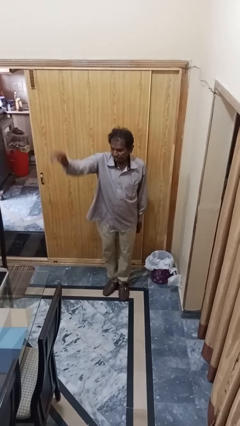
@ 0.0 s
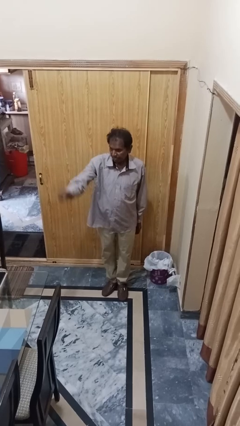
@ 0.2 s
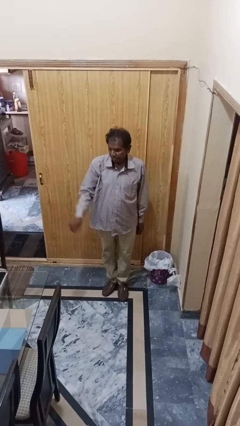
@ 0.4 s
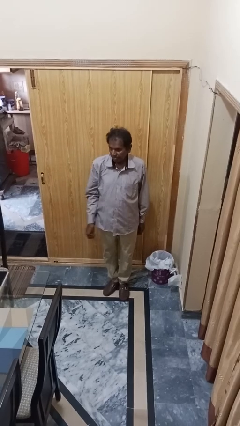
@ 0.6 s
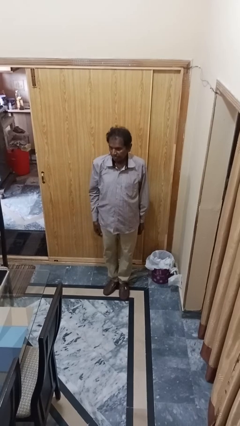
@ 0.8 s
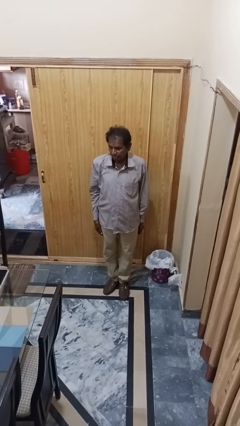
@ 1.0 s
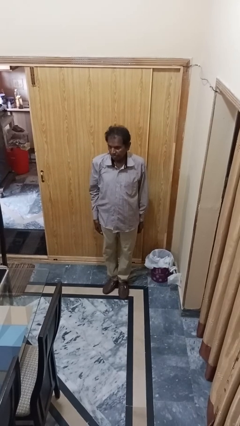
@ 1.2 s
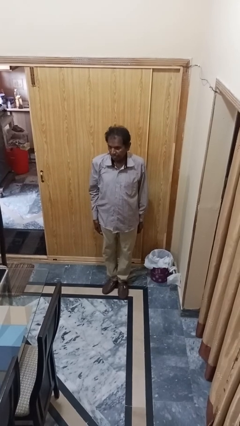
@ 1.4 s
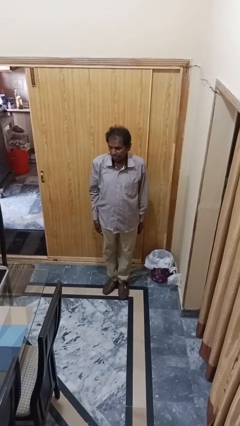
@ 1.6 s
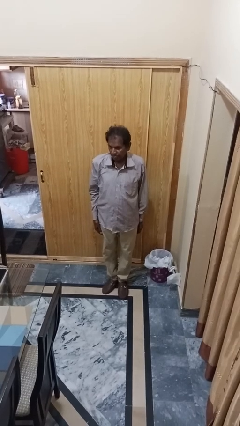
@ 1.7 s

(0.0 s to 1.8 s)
person gestures lower hand

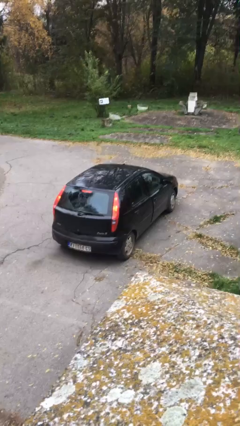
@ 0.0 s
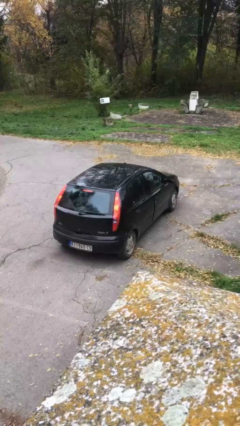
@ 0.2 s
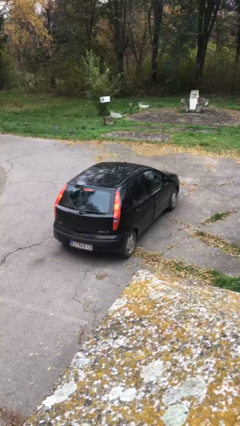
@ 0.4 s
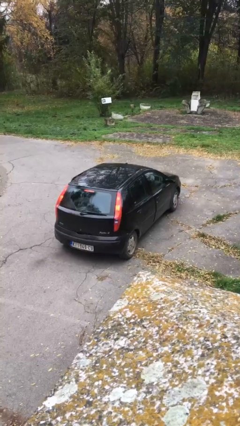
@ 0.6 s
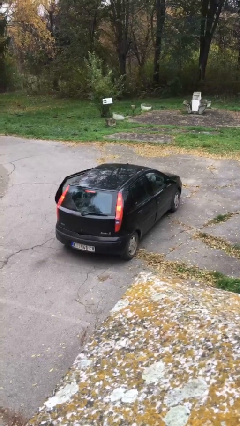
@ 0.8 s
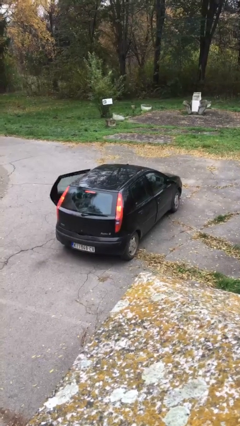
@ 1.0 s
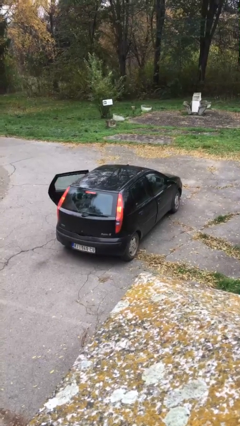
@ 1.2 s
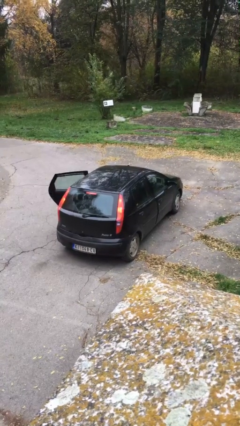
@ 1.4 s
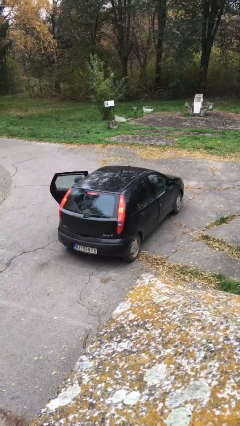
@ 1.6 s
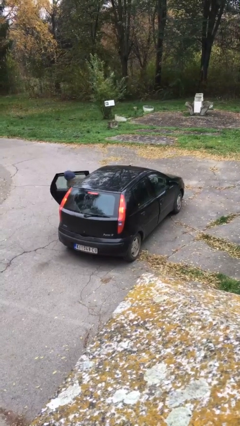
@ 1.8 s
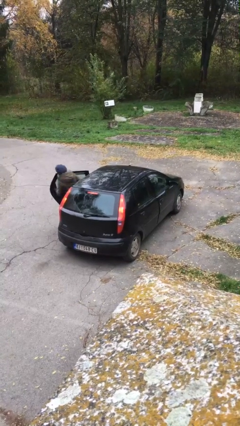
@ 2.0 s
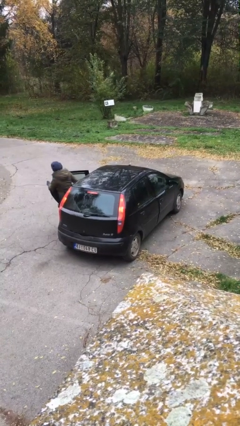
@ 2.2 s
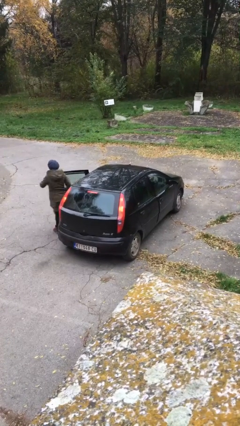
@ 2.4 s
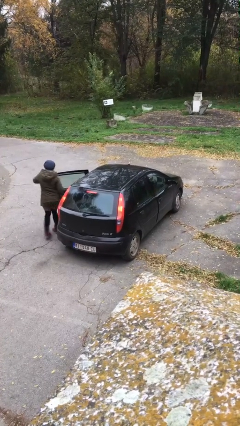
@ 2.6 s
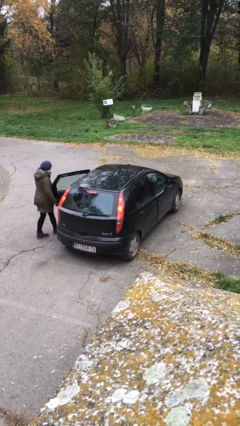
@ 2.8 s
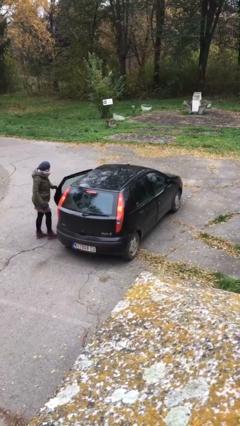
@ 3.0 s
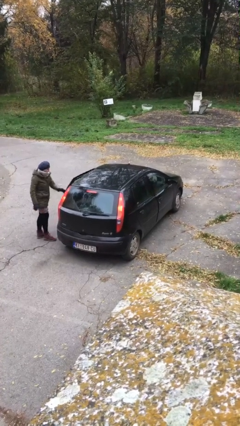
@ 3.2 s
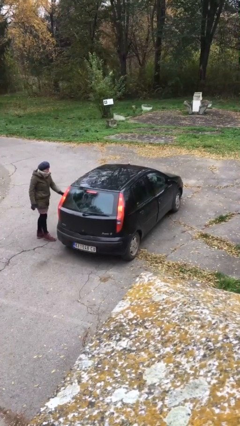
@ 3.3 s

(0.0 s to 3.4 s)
car drops off person

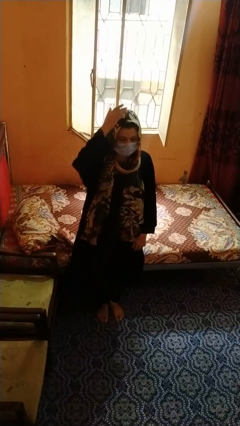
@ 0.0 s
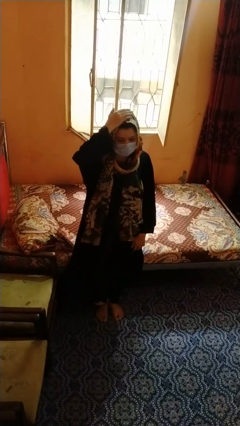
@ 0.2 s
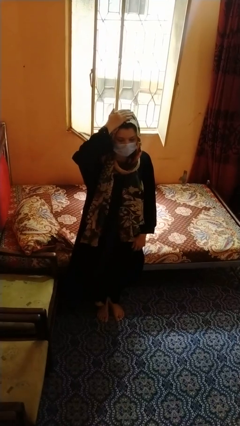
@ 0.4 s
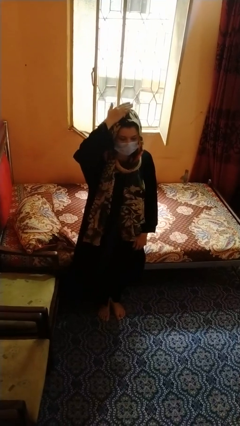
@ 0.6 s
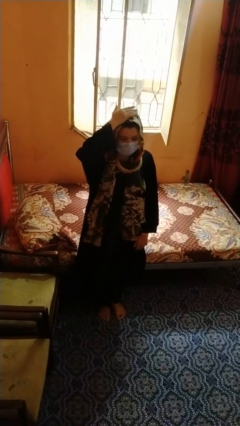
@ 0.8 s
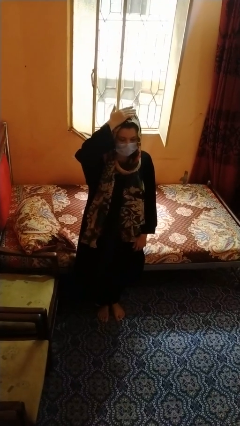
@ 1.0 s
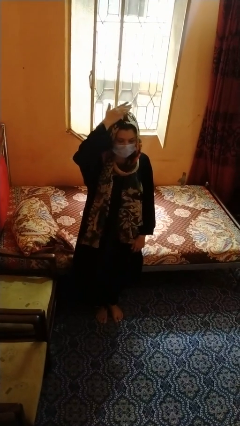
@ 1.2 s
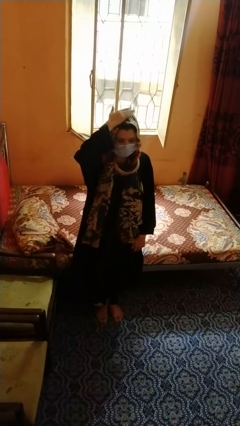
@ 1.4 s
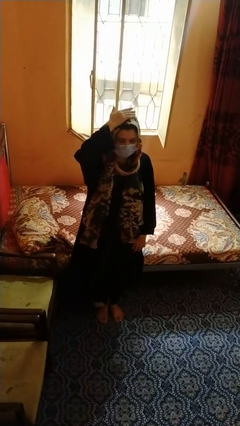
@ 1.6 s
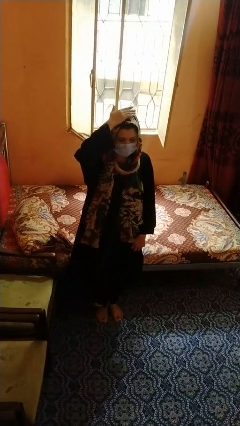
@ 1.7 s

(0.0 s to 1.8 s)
person pats head

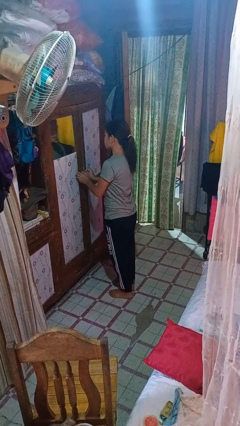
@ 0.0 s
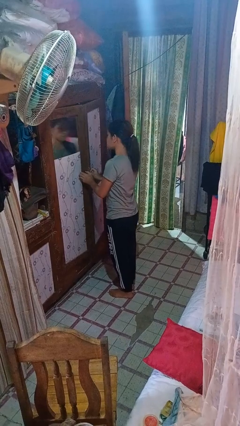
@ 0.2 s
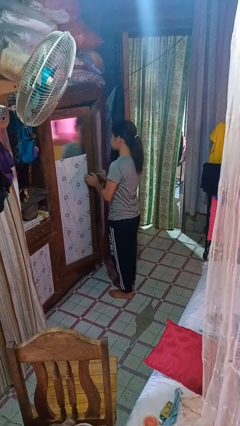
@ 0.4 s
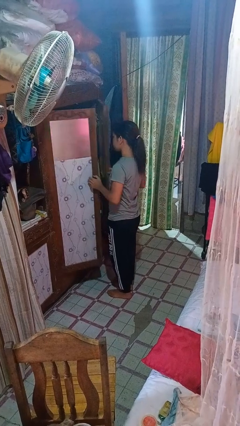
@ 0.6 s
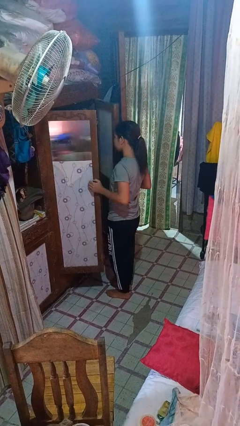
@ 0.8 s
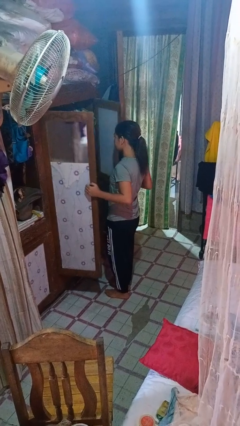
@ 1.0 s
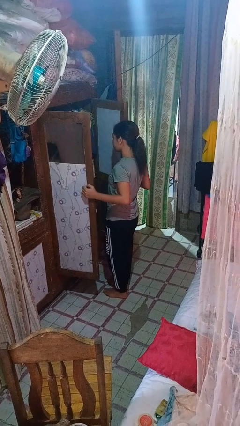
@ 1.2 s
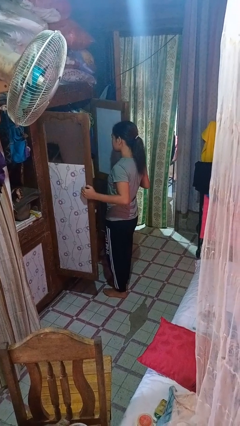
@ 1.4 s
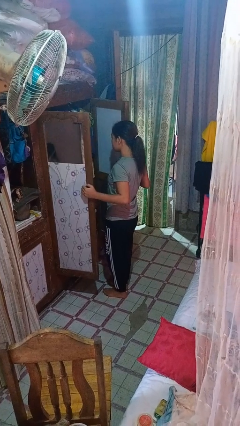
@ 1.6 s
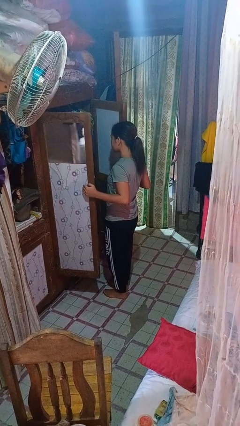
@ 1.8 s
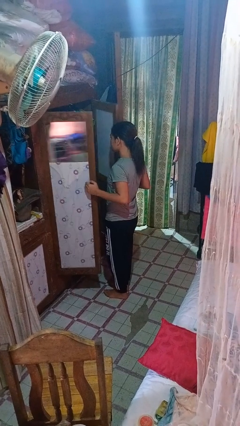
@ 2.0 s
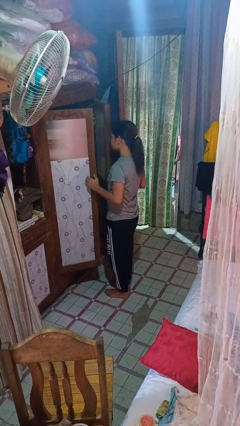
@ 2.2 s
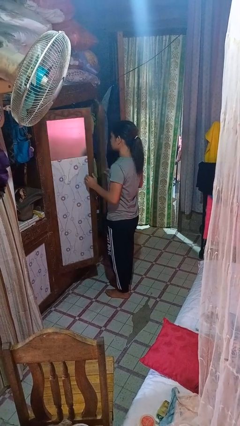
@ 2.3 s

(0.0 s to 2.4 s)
person opens closet door

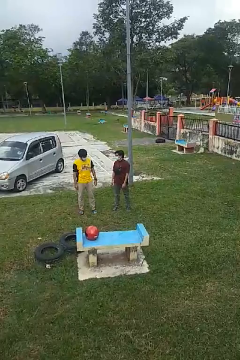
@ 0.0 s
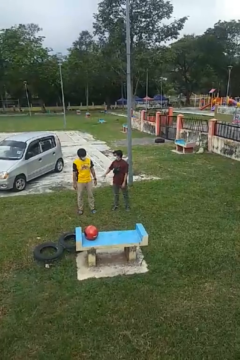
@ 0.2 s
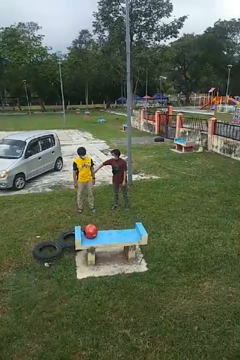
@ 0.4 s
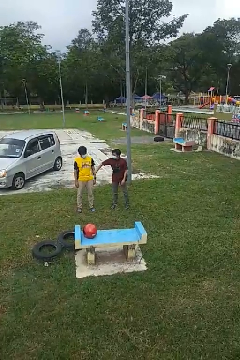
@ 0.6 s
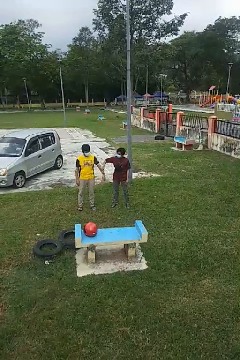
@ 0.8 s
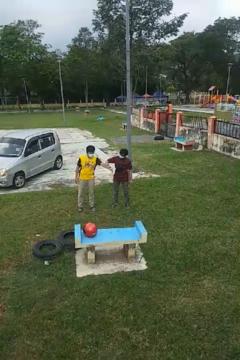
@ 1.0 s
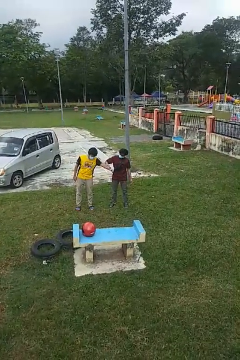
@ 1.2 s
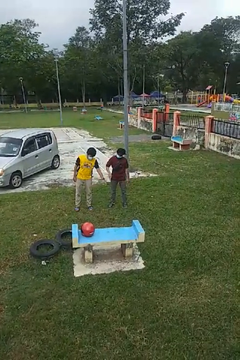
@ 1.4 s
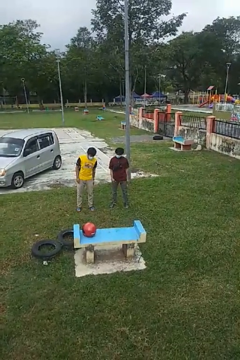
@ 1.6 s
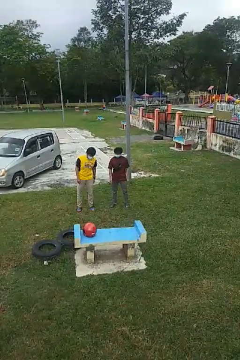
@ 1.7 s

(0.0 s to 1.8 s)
person grabs person by forearm

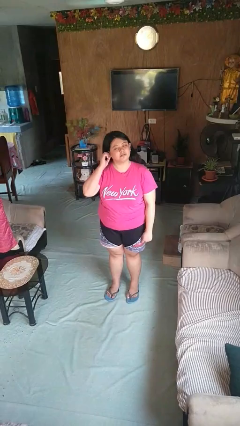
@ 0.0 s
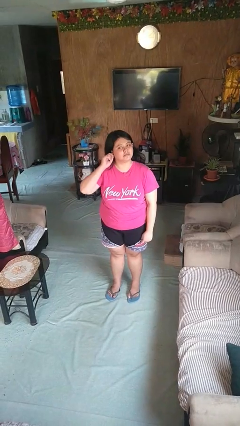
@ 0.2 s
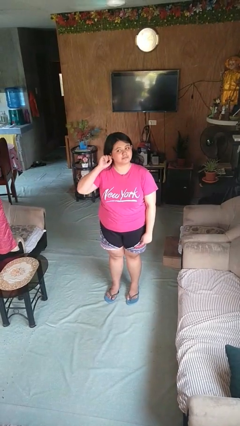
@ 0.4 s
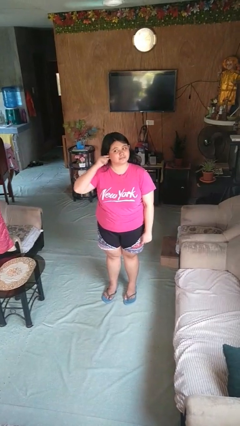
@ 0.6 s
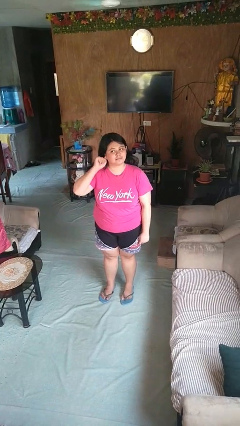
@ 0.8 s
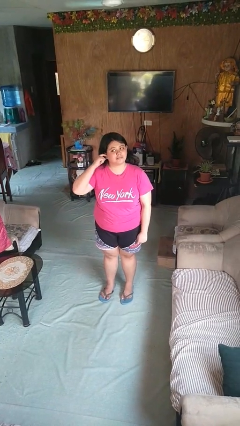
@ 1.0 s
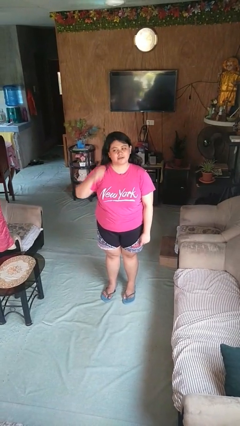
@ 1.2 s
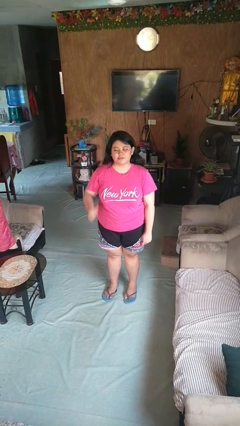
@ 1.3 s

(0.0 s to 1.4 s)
person touches earlobe

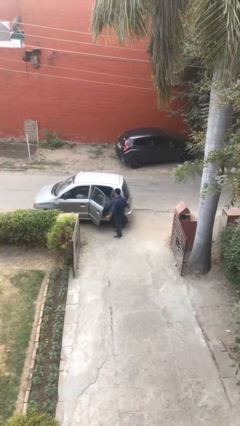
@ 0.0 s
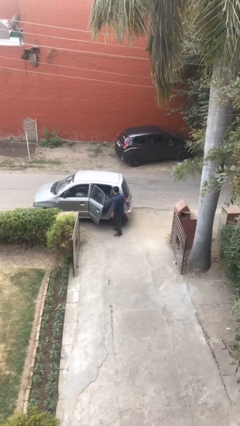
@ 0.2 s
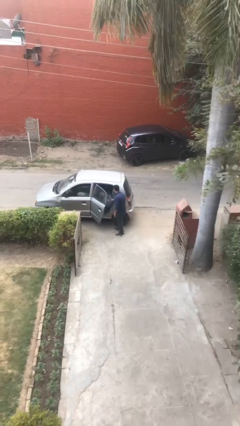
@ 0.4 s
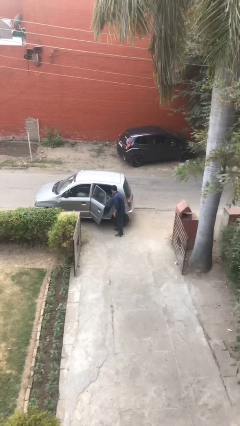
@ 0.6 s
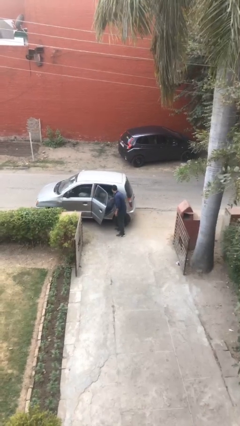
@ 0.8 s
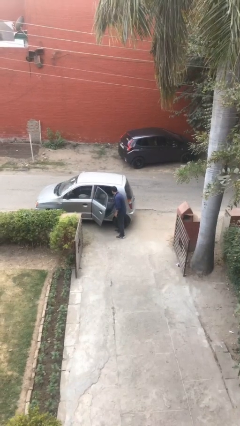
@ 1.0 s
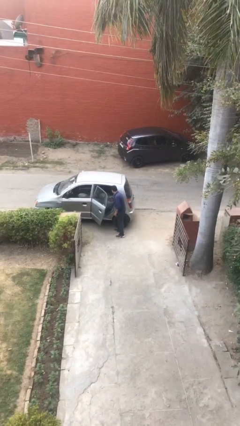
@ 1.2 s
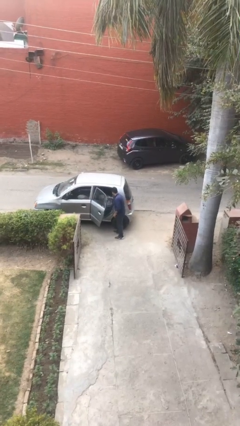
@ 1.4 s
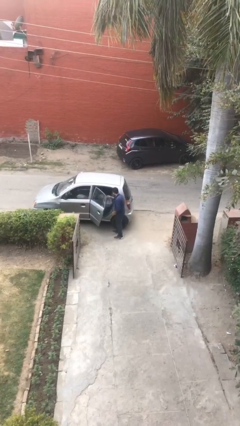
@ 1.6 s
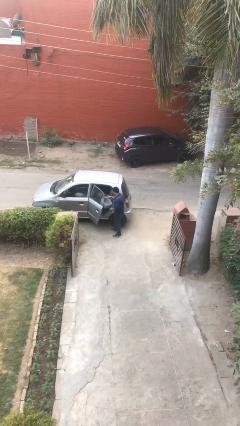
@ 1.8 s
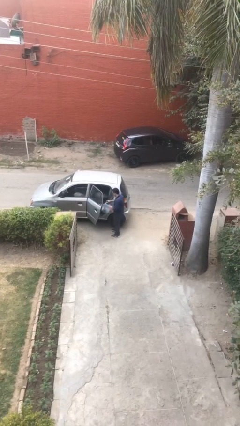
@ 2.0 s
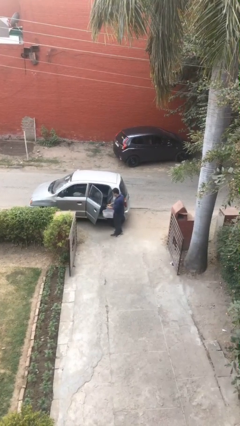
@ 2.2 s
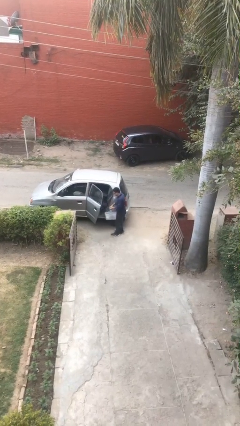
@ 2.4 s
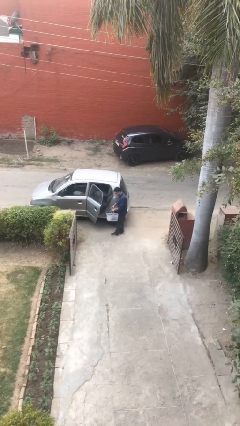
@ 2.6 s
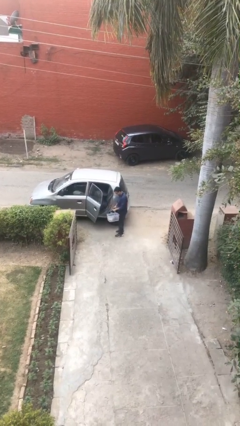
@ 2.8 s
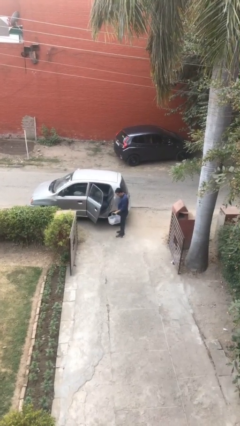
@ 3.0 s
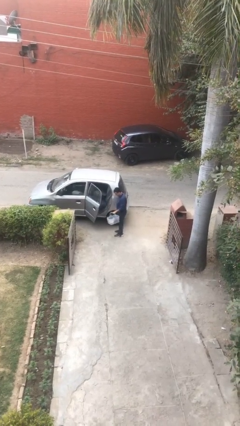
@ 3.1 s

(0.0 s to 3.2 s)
person unloads car

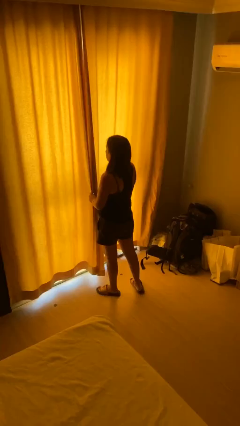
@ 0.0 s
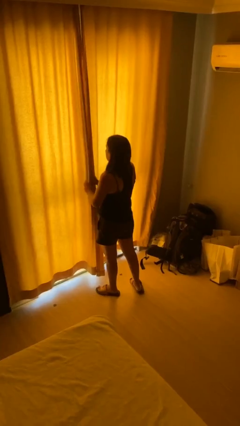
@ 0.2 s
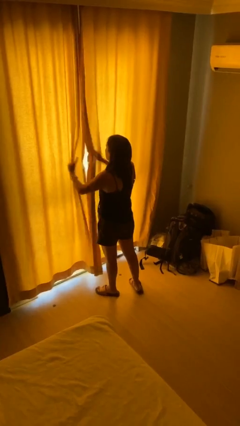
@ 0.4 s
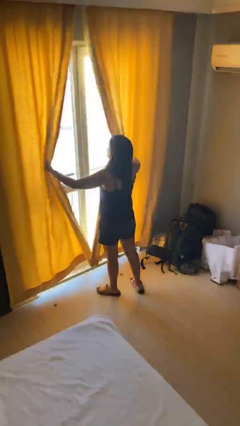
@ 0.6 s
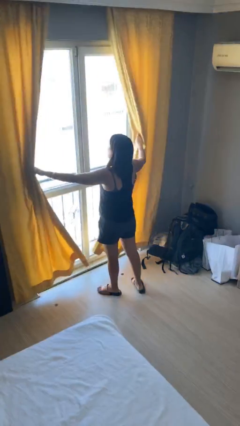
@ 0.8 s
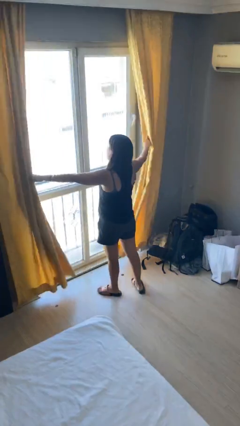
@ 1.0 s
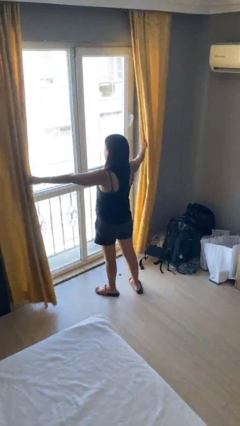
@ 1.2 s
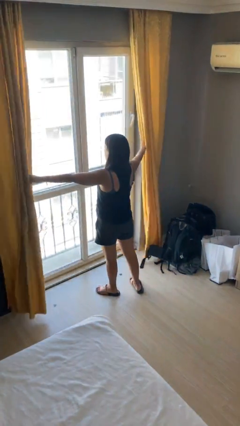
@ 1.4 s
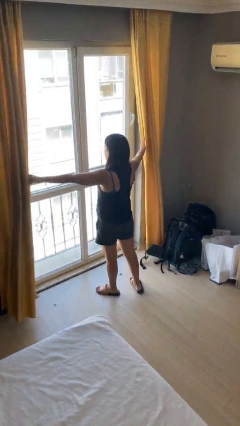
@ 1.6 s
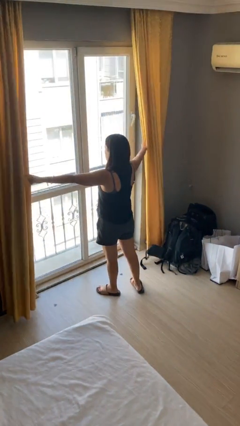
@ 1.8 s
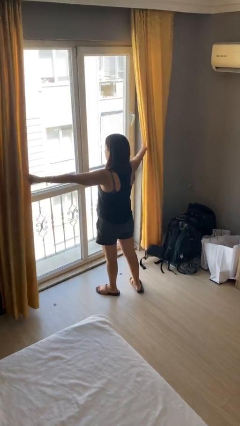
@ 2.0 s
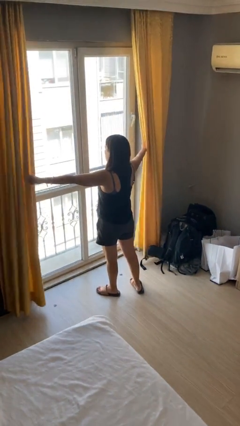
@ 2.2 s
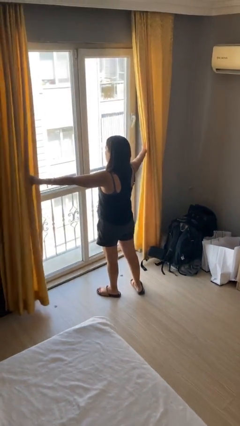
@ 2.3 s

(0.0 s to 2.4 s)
person opens curtains
